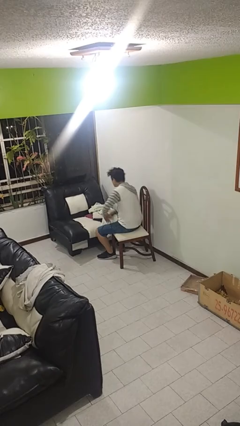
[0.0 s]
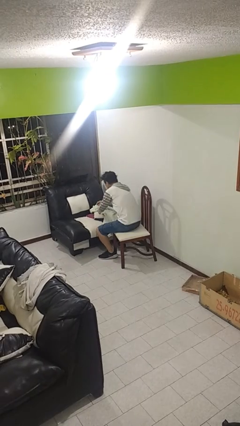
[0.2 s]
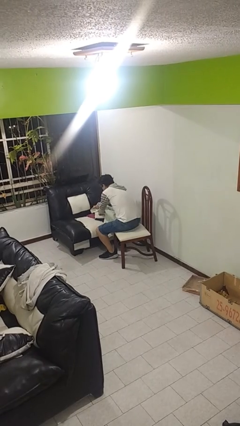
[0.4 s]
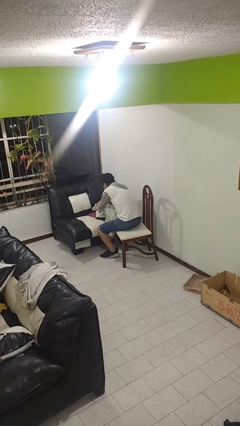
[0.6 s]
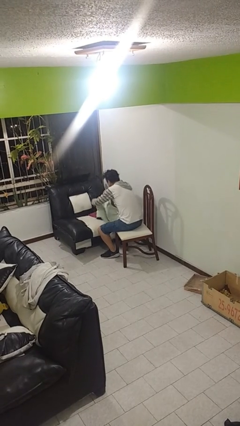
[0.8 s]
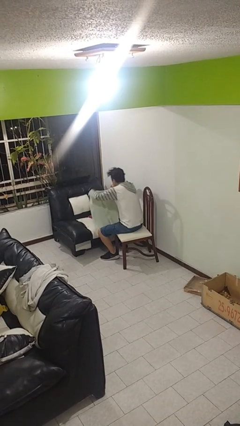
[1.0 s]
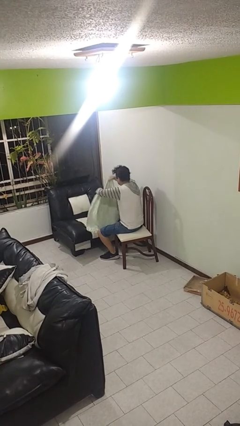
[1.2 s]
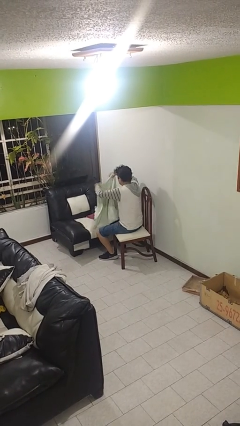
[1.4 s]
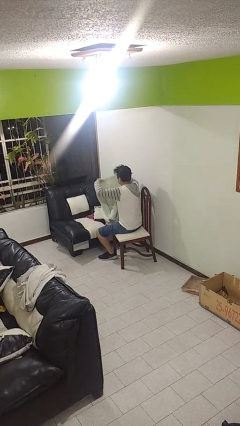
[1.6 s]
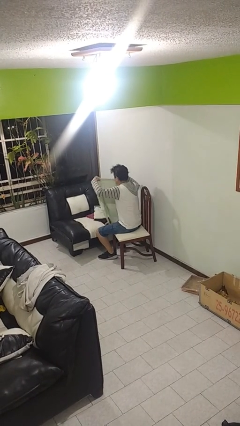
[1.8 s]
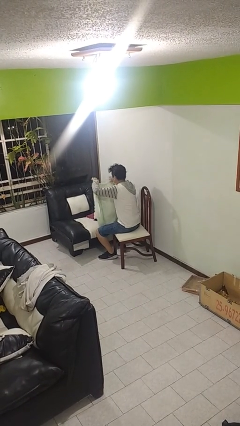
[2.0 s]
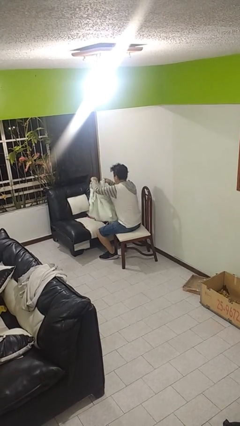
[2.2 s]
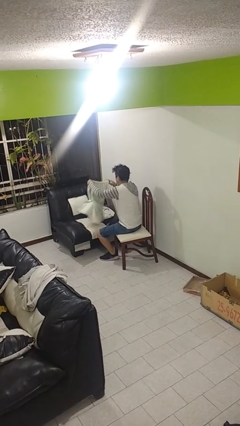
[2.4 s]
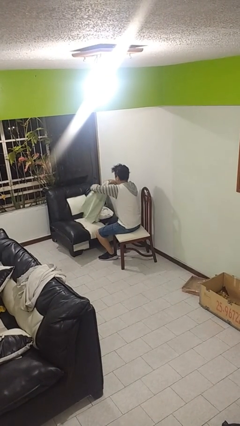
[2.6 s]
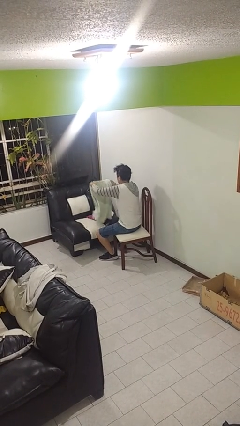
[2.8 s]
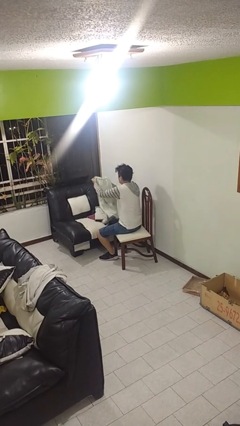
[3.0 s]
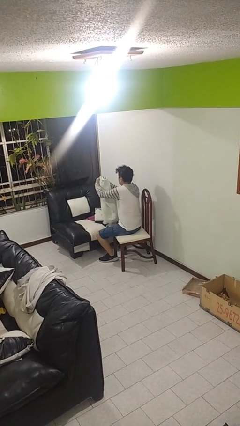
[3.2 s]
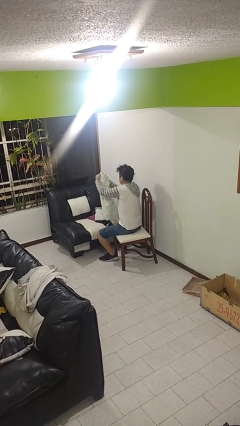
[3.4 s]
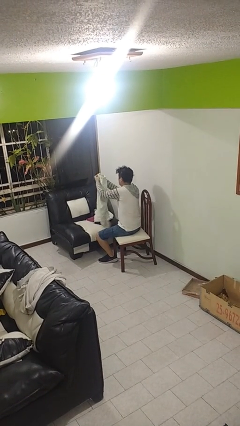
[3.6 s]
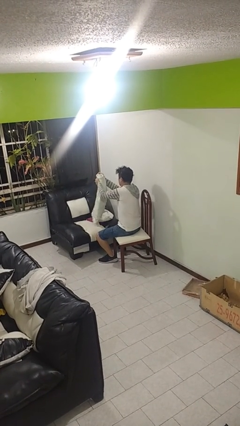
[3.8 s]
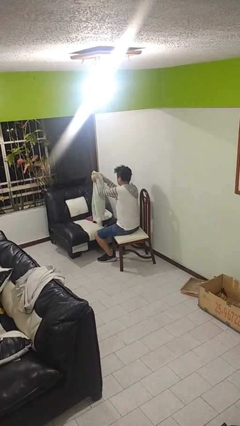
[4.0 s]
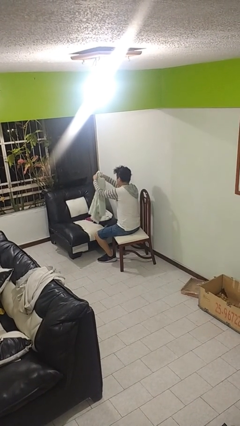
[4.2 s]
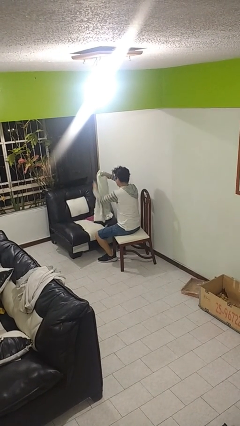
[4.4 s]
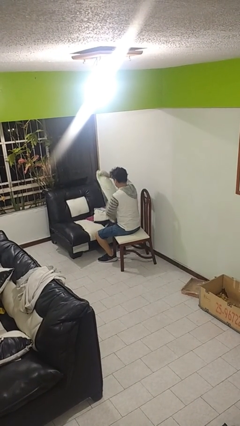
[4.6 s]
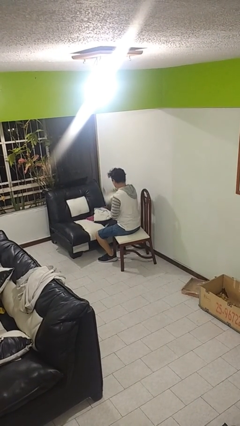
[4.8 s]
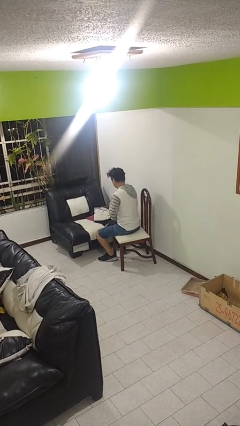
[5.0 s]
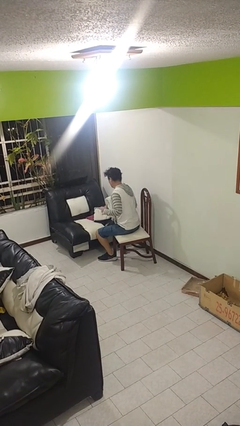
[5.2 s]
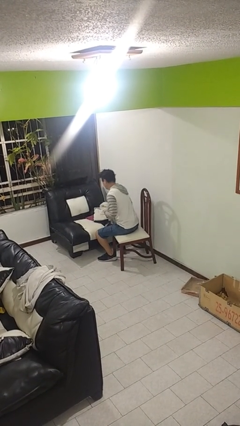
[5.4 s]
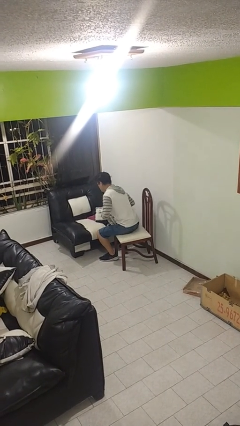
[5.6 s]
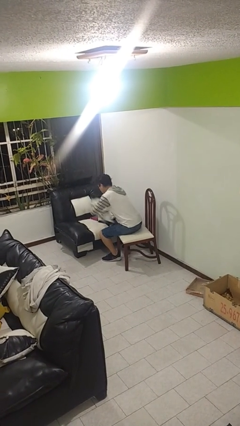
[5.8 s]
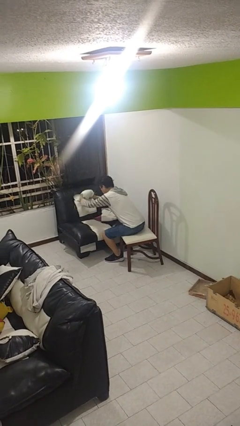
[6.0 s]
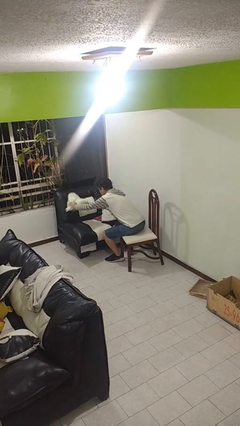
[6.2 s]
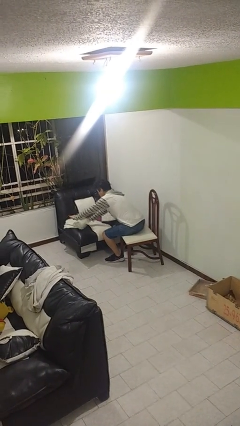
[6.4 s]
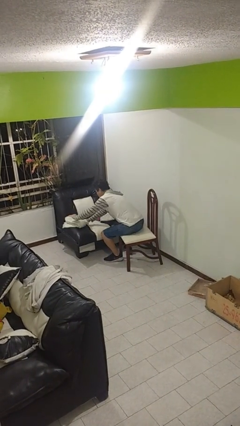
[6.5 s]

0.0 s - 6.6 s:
person folds towel

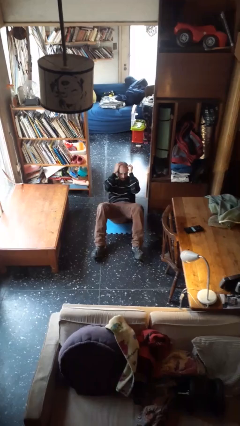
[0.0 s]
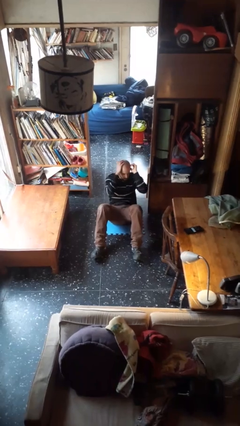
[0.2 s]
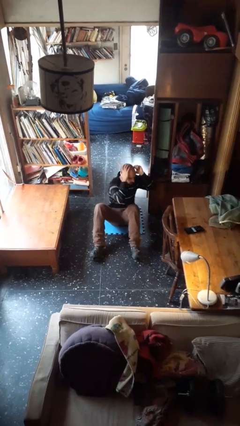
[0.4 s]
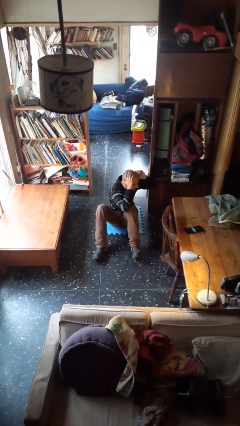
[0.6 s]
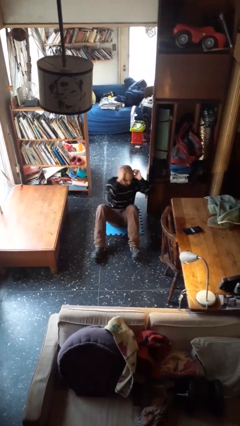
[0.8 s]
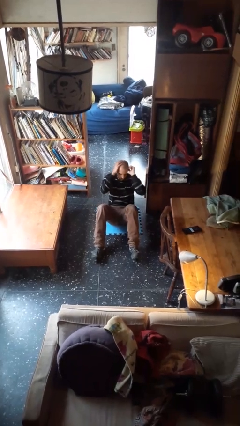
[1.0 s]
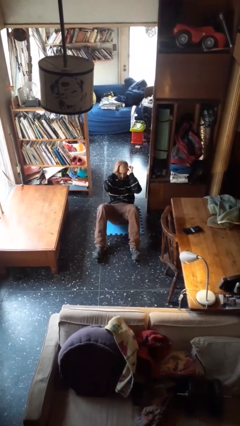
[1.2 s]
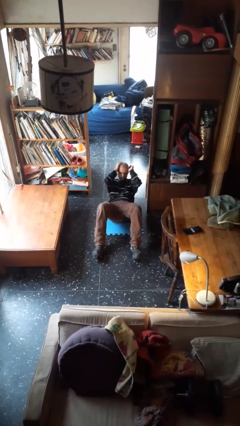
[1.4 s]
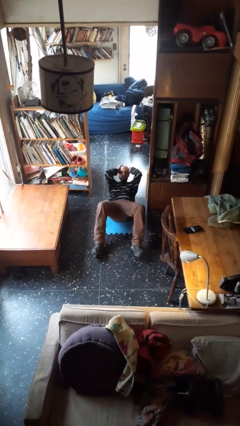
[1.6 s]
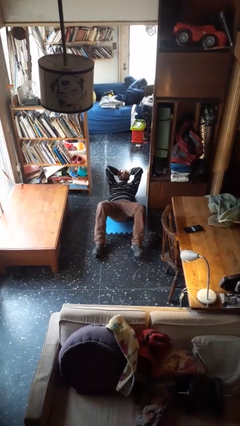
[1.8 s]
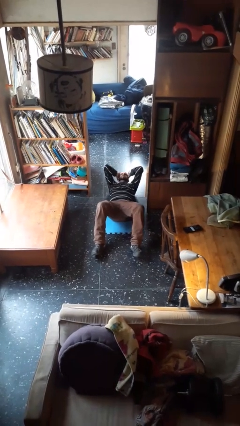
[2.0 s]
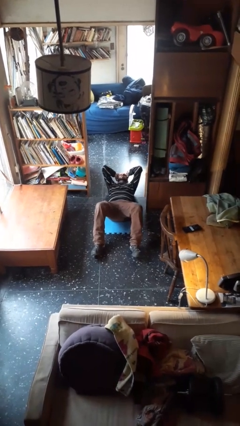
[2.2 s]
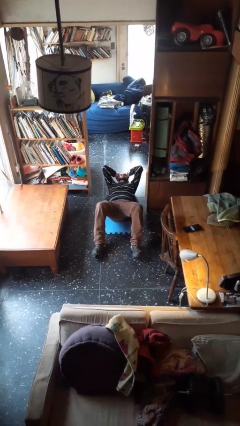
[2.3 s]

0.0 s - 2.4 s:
person exercises with situp

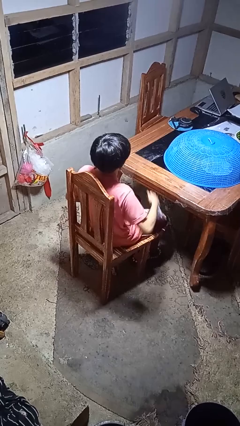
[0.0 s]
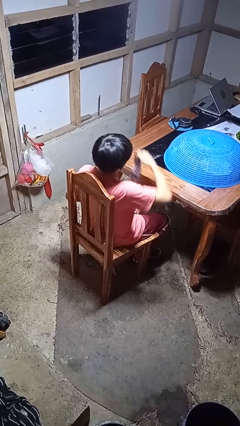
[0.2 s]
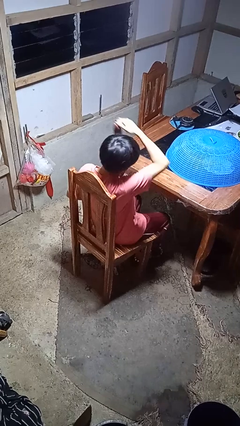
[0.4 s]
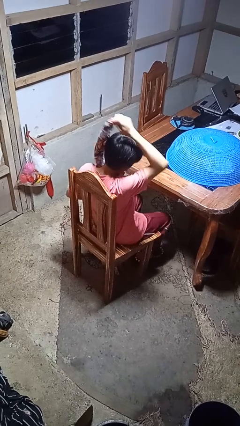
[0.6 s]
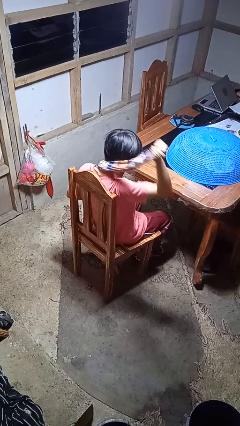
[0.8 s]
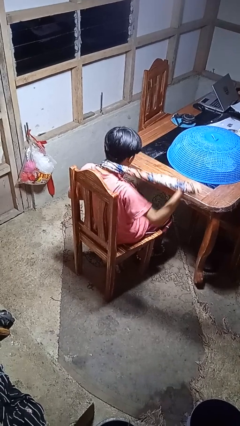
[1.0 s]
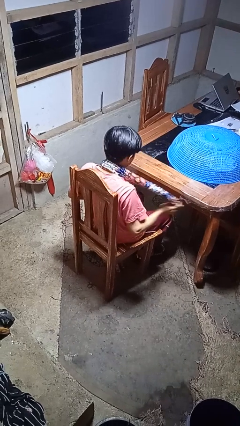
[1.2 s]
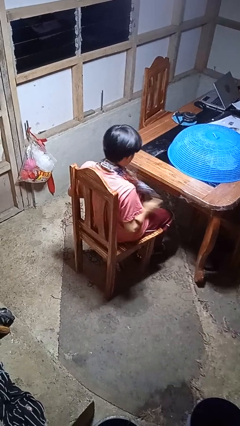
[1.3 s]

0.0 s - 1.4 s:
person puts on scarf

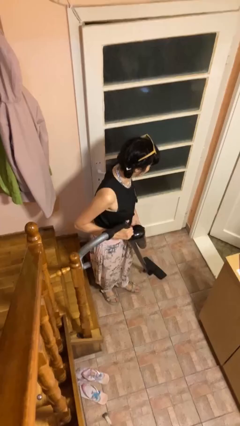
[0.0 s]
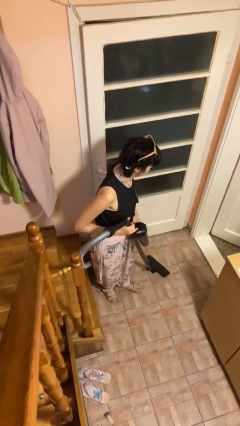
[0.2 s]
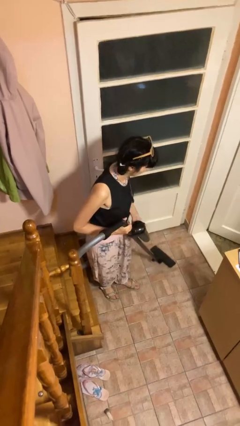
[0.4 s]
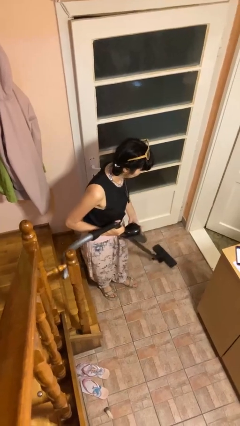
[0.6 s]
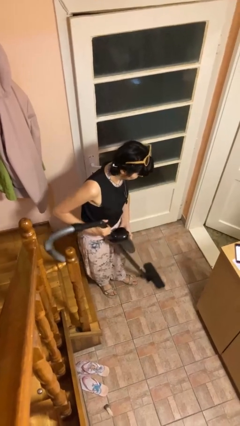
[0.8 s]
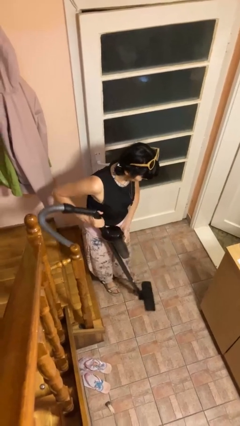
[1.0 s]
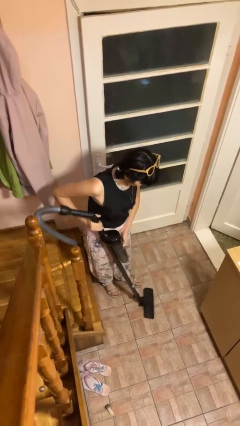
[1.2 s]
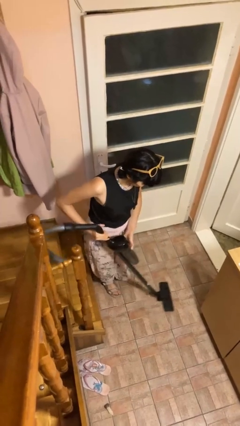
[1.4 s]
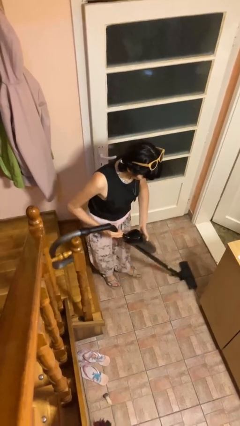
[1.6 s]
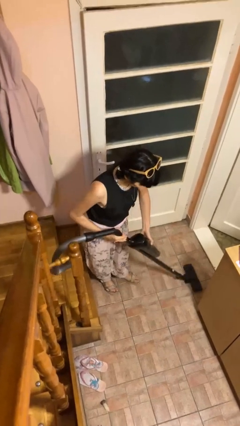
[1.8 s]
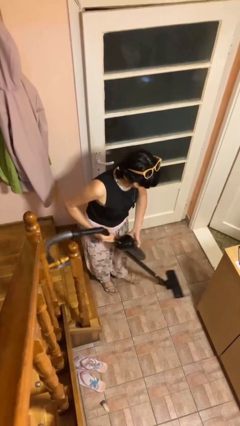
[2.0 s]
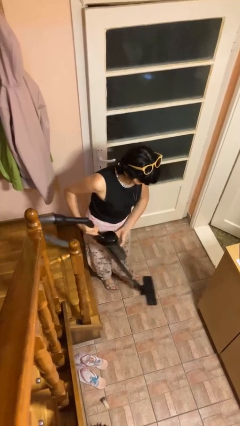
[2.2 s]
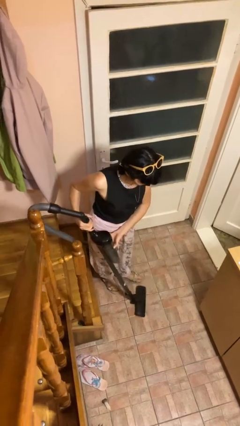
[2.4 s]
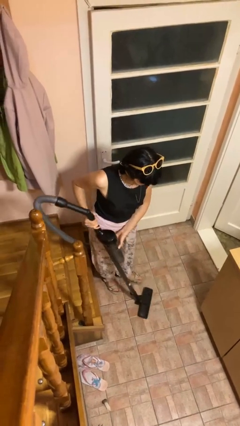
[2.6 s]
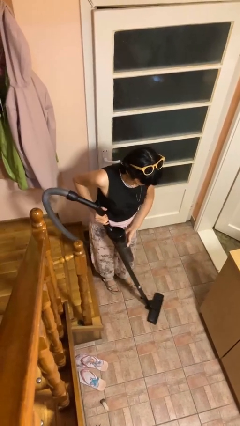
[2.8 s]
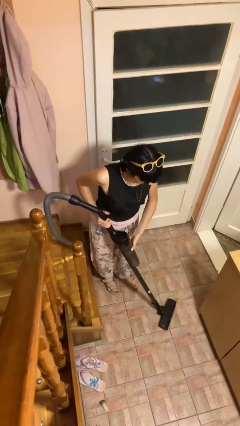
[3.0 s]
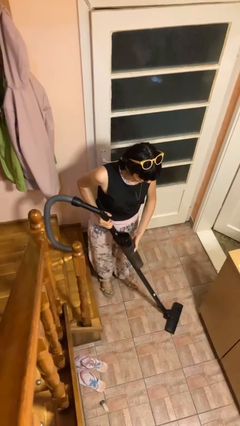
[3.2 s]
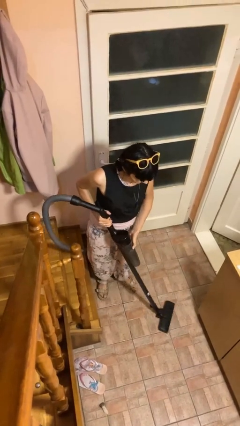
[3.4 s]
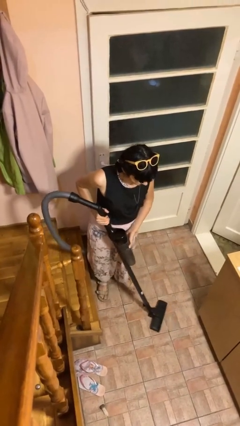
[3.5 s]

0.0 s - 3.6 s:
person vacuums carpet

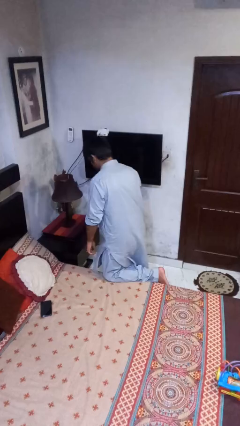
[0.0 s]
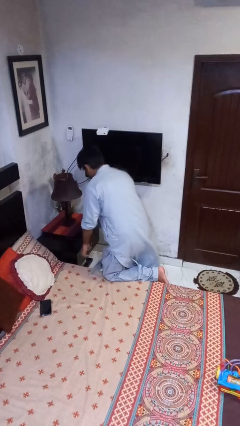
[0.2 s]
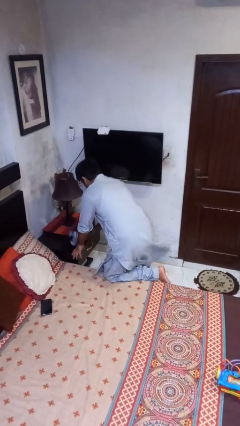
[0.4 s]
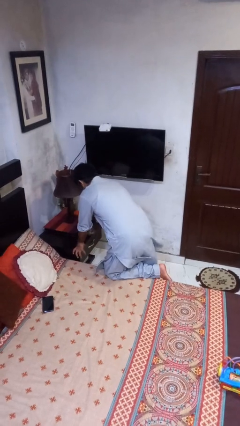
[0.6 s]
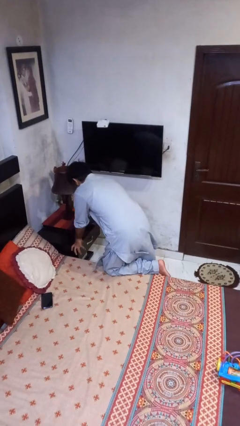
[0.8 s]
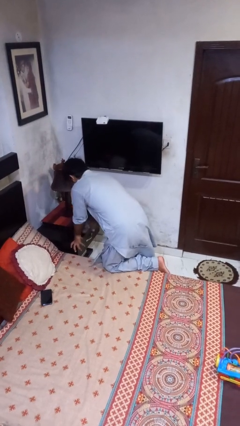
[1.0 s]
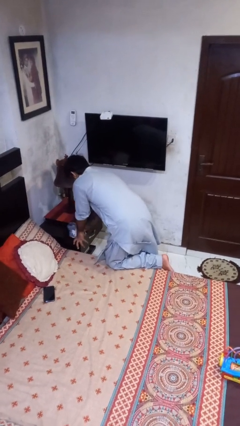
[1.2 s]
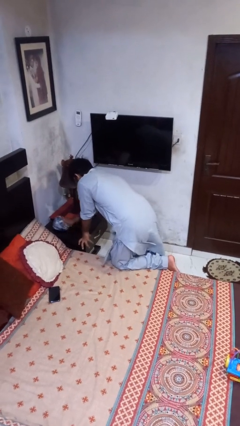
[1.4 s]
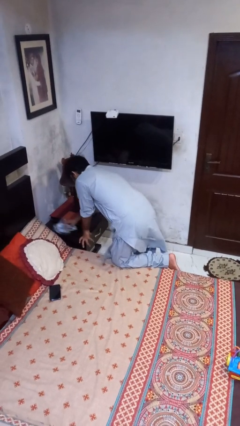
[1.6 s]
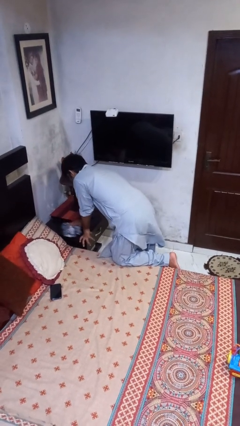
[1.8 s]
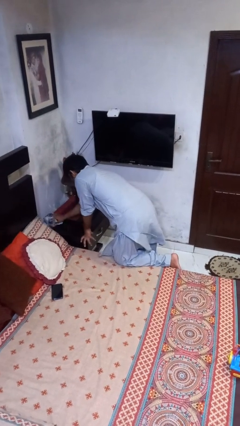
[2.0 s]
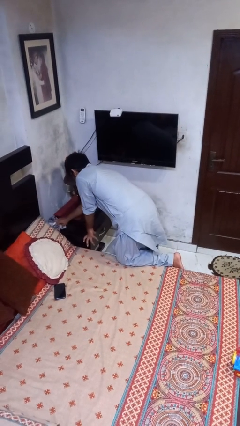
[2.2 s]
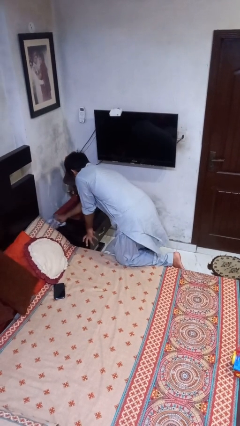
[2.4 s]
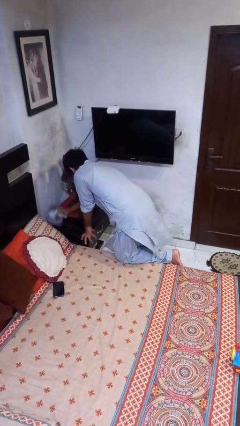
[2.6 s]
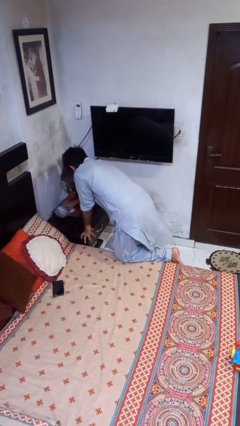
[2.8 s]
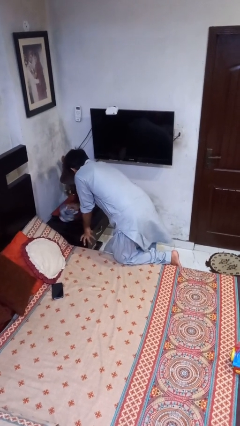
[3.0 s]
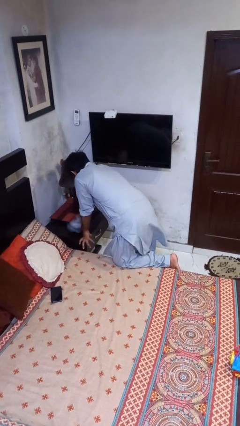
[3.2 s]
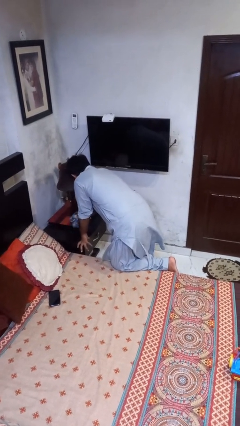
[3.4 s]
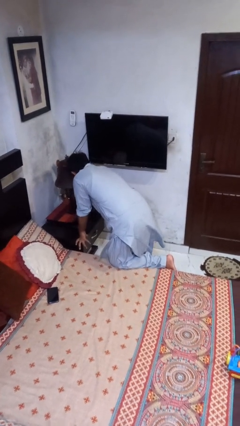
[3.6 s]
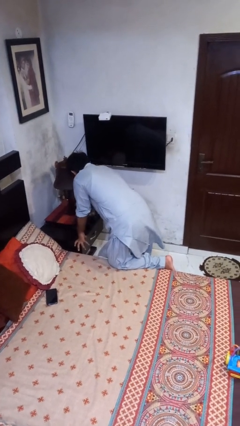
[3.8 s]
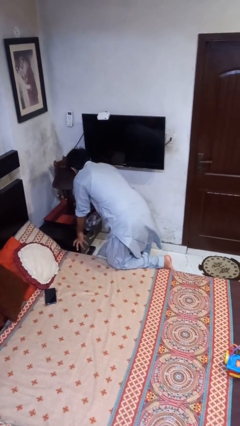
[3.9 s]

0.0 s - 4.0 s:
person cleans table with rag
